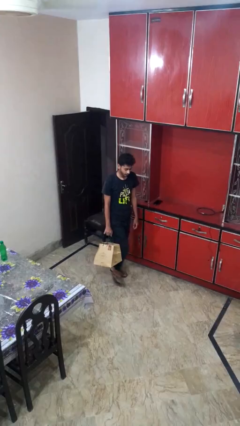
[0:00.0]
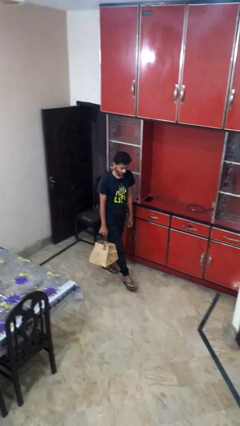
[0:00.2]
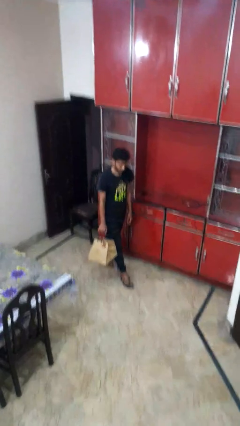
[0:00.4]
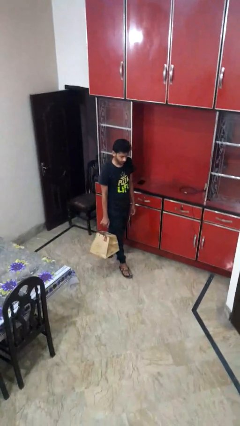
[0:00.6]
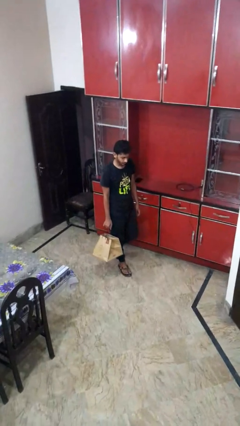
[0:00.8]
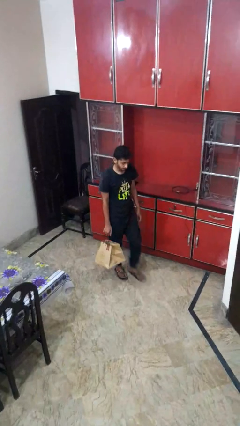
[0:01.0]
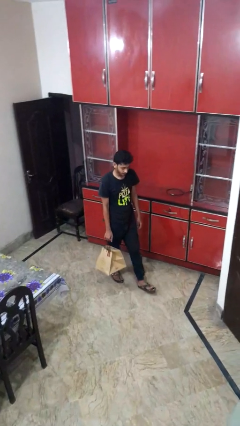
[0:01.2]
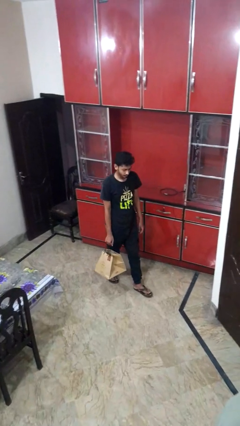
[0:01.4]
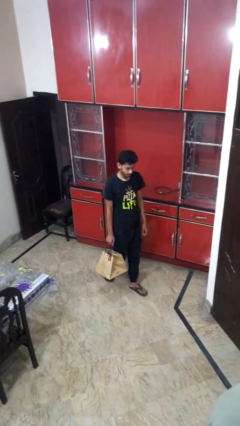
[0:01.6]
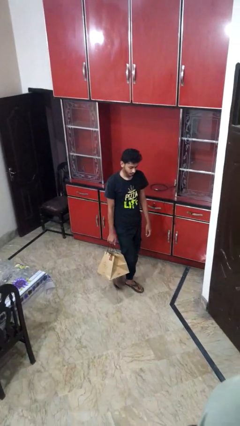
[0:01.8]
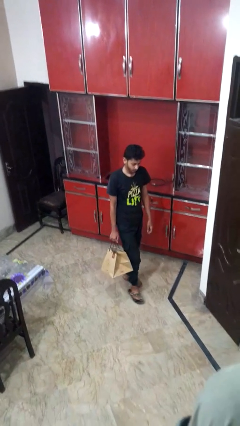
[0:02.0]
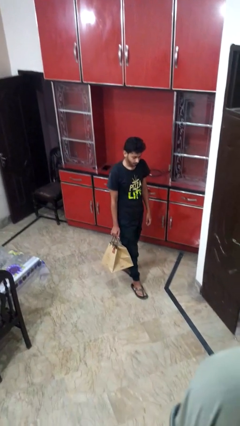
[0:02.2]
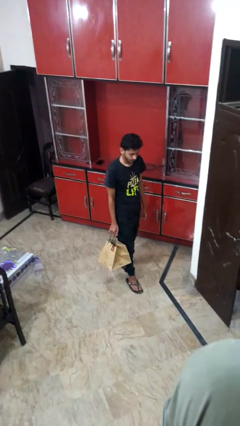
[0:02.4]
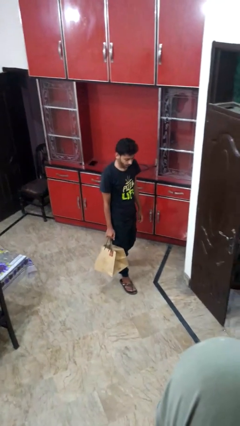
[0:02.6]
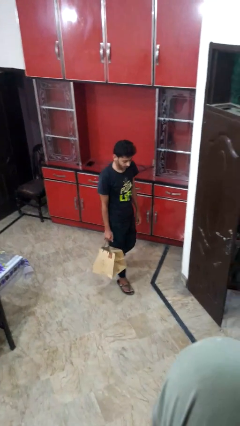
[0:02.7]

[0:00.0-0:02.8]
person carries groceries

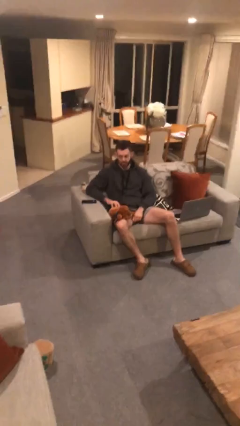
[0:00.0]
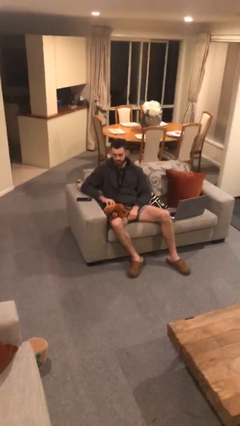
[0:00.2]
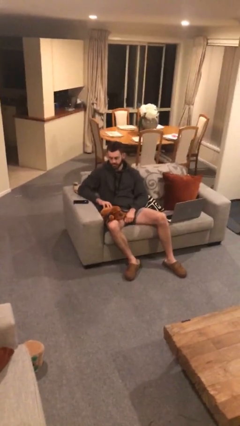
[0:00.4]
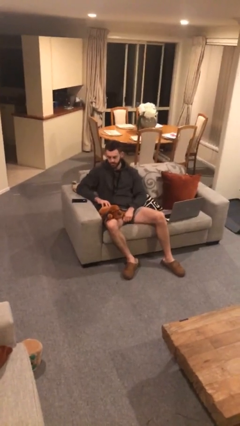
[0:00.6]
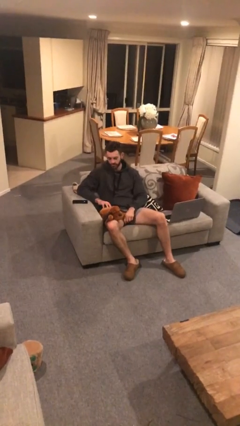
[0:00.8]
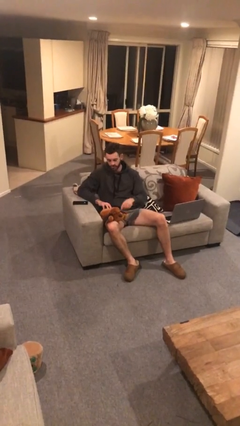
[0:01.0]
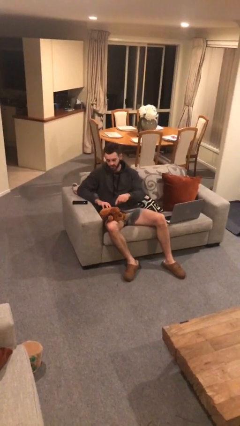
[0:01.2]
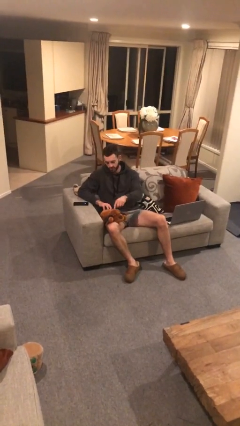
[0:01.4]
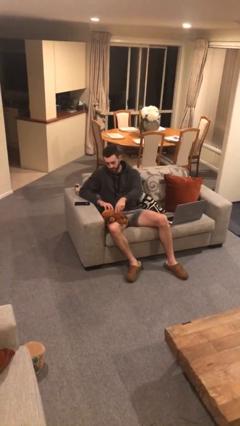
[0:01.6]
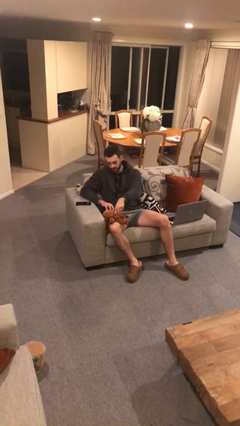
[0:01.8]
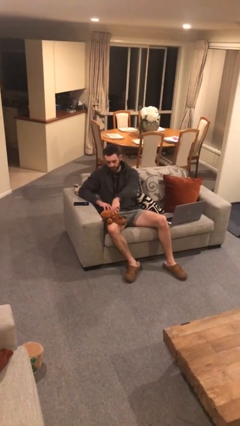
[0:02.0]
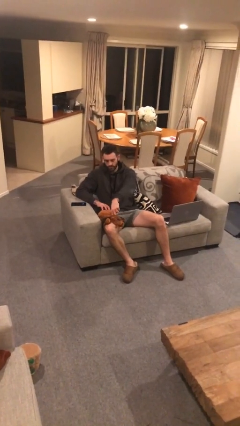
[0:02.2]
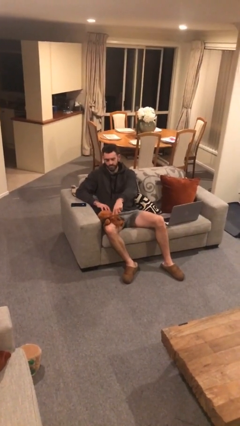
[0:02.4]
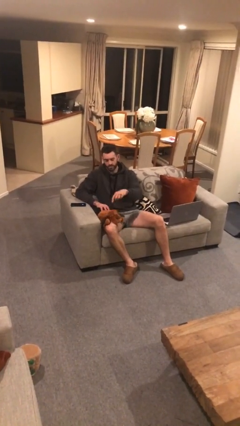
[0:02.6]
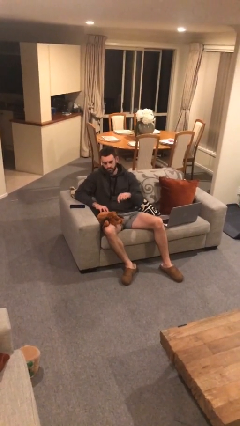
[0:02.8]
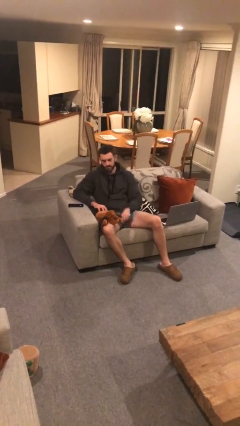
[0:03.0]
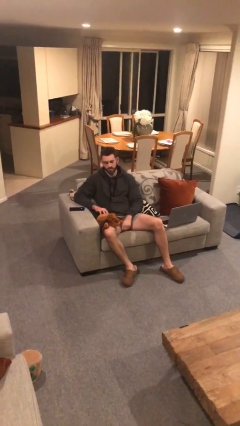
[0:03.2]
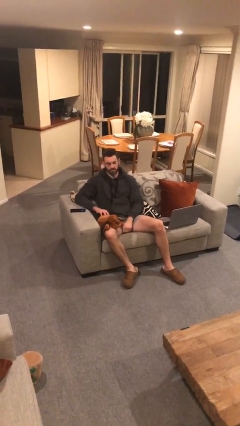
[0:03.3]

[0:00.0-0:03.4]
person taps object with finger

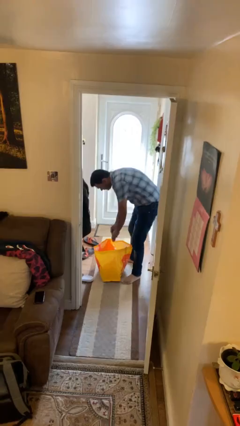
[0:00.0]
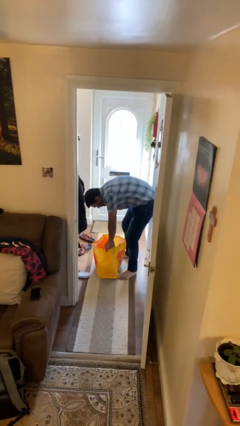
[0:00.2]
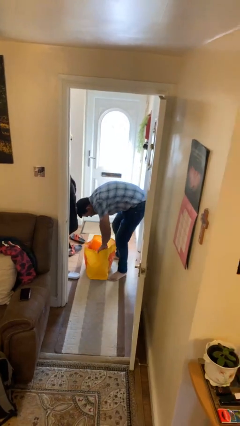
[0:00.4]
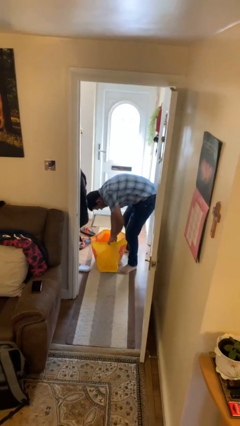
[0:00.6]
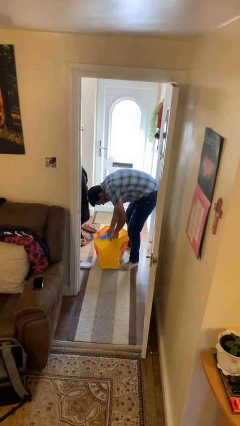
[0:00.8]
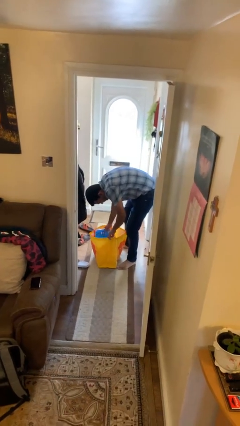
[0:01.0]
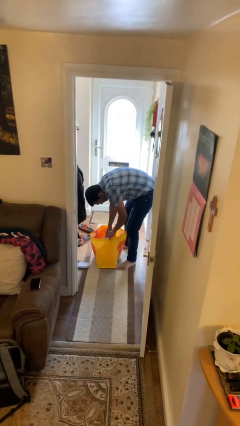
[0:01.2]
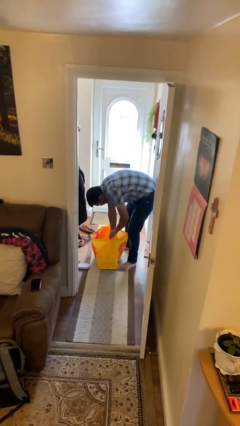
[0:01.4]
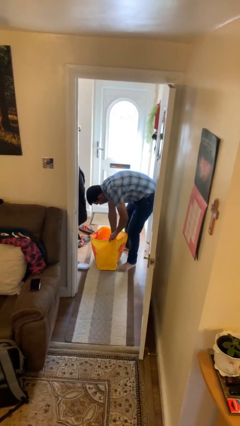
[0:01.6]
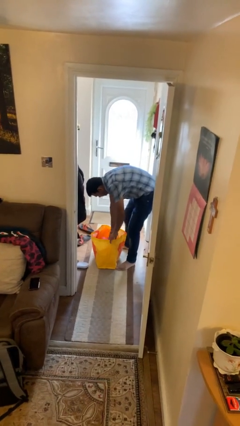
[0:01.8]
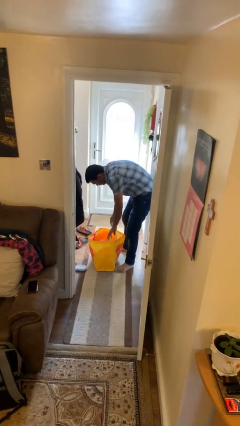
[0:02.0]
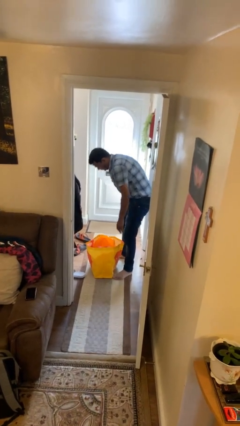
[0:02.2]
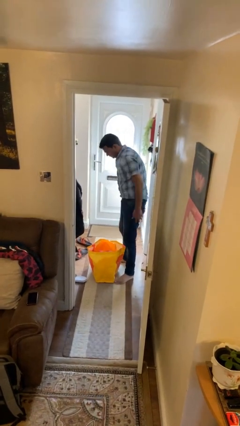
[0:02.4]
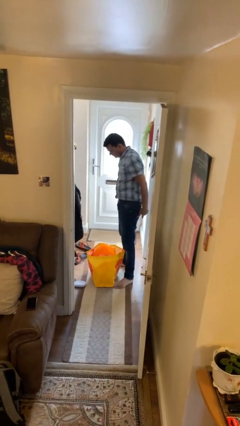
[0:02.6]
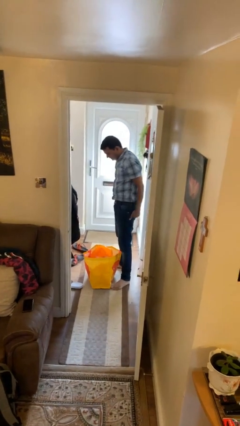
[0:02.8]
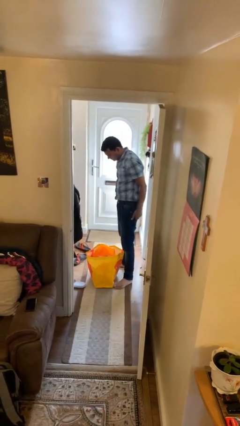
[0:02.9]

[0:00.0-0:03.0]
person searches in bag

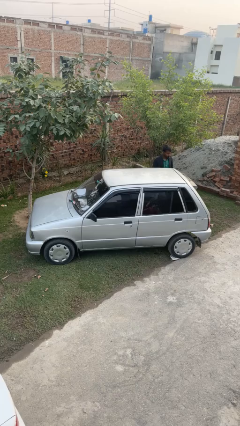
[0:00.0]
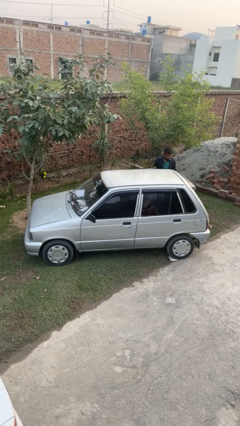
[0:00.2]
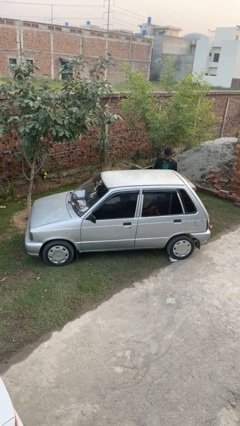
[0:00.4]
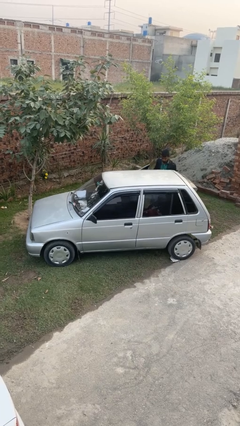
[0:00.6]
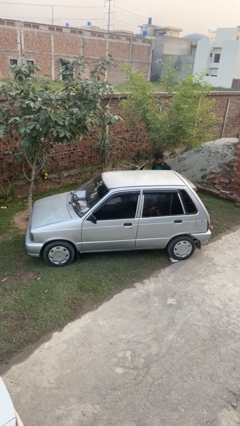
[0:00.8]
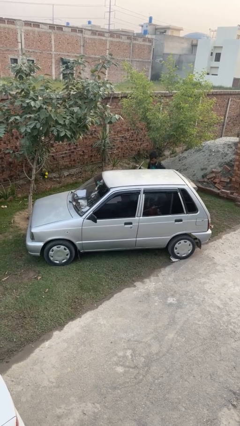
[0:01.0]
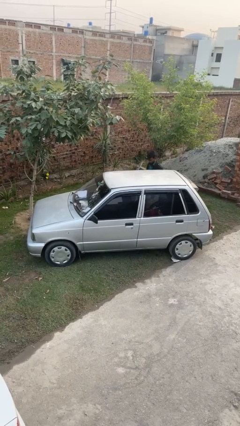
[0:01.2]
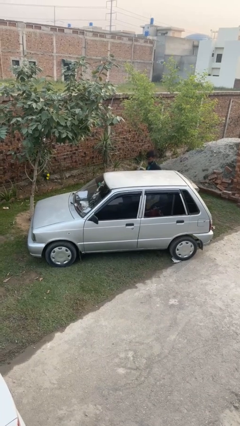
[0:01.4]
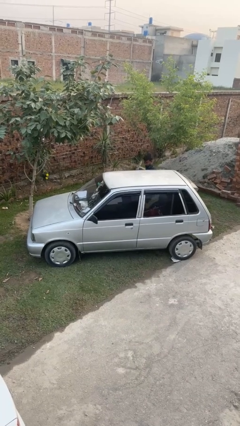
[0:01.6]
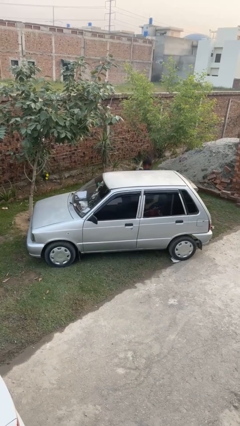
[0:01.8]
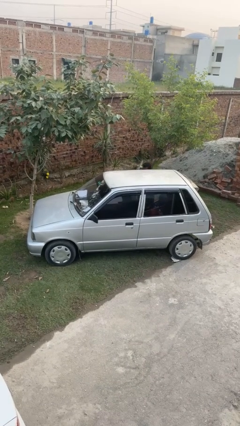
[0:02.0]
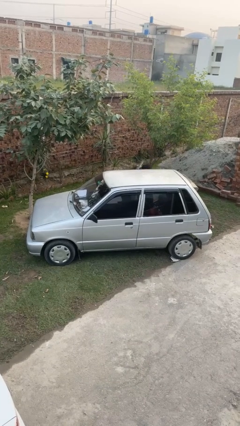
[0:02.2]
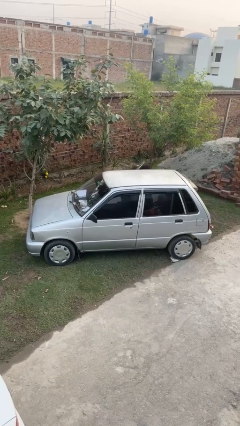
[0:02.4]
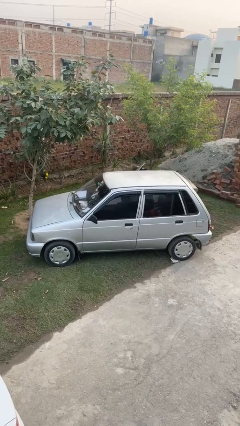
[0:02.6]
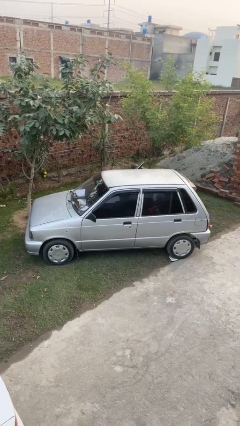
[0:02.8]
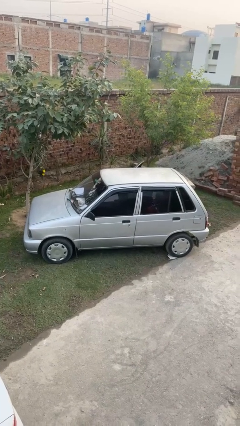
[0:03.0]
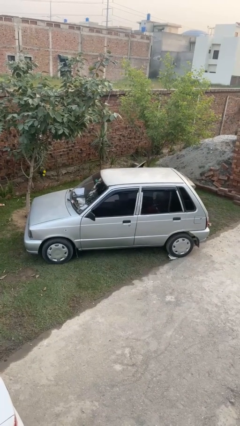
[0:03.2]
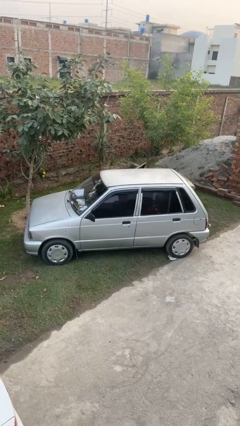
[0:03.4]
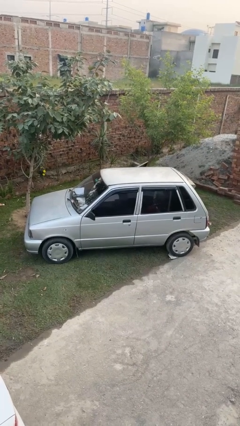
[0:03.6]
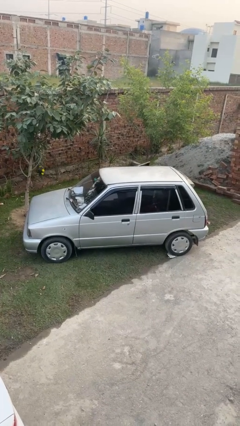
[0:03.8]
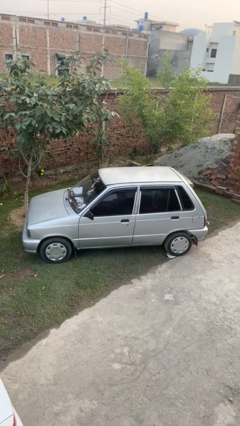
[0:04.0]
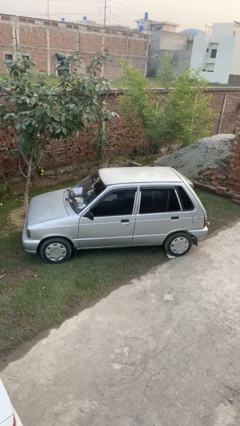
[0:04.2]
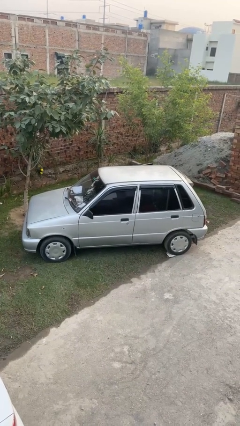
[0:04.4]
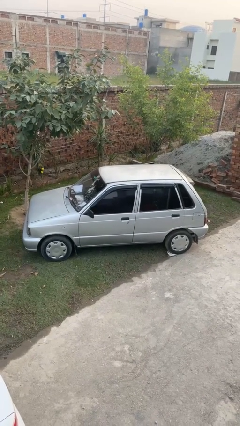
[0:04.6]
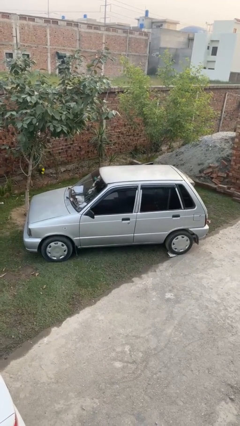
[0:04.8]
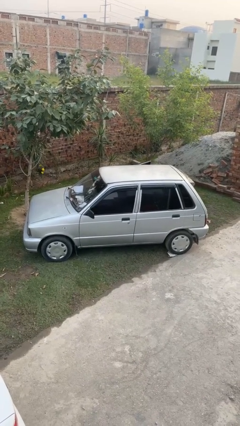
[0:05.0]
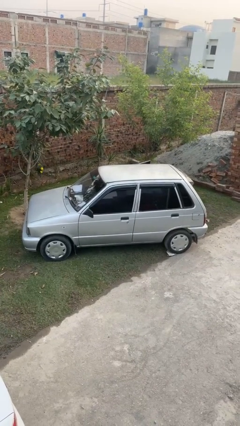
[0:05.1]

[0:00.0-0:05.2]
car picks up person

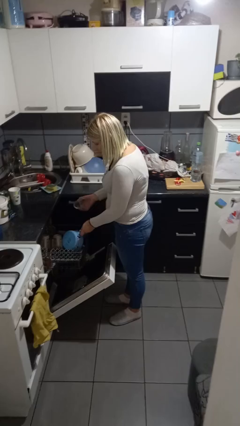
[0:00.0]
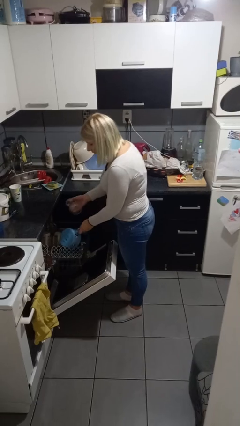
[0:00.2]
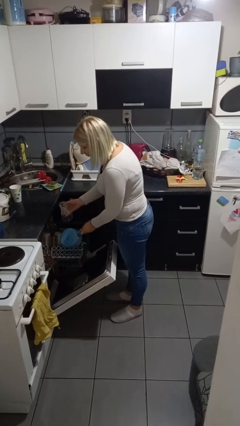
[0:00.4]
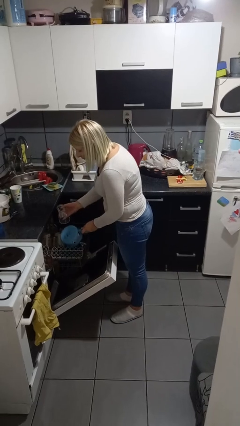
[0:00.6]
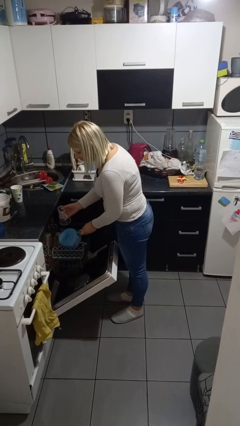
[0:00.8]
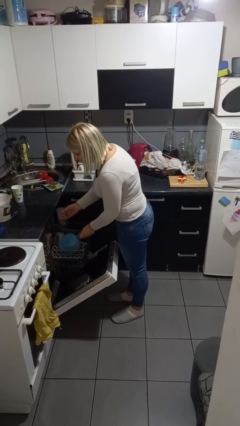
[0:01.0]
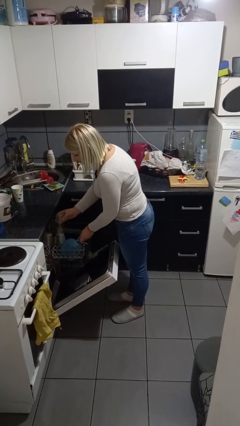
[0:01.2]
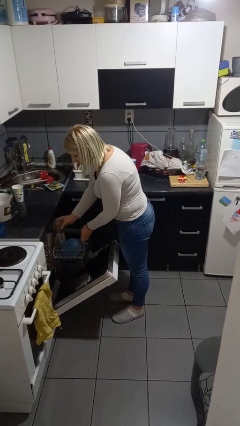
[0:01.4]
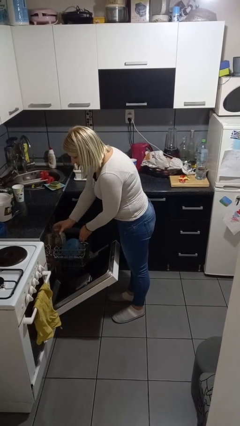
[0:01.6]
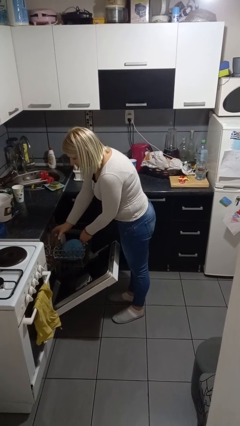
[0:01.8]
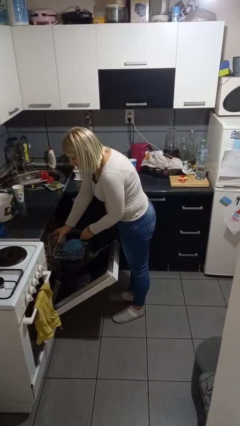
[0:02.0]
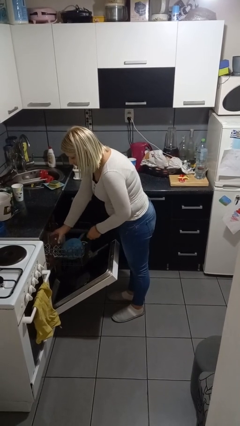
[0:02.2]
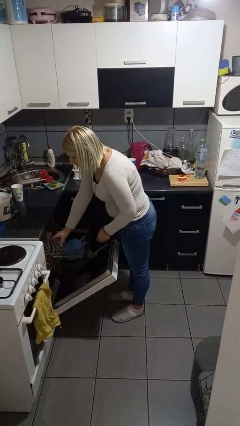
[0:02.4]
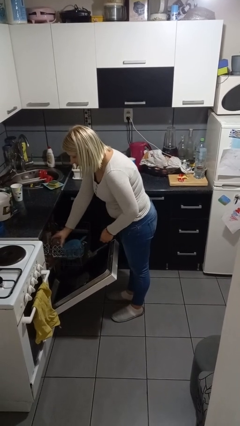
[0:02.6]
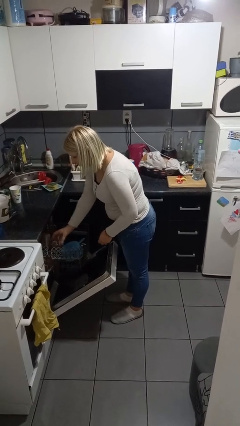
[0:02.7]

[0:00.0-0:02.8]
person loads dishwasher
